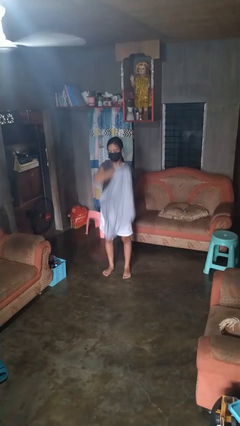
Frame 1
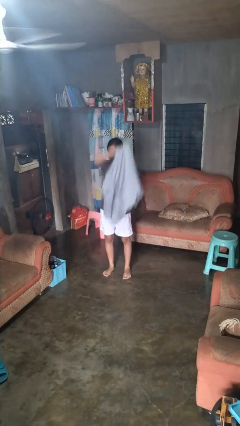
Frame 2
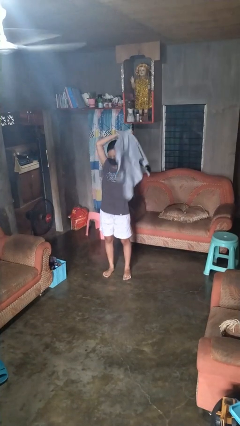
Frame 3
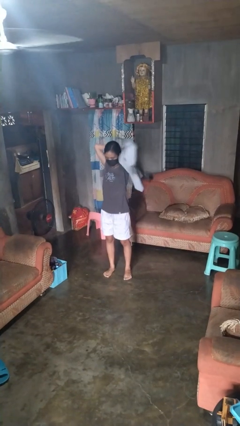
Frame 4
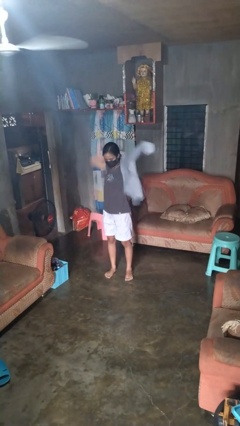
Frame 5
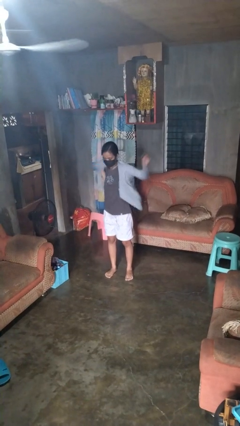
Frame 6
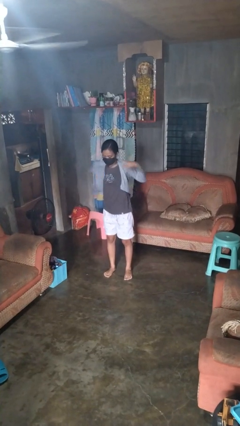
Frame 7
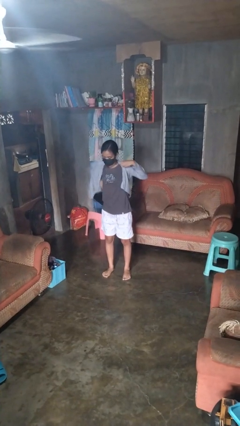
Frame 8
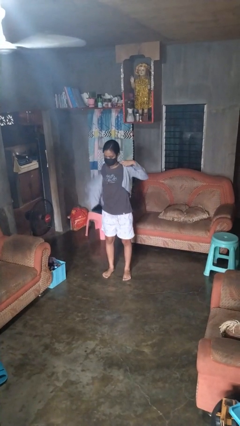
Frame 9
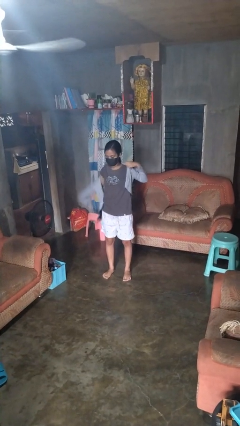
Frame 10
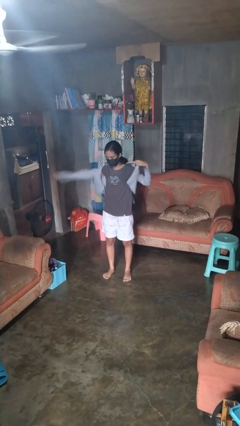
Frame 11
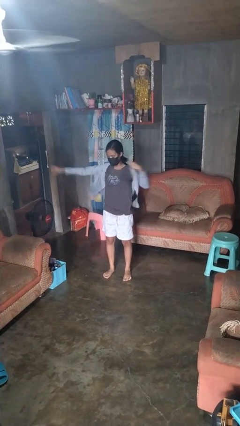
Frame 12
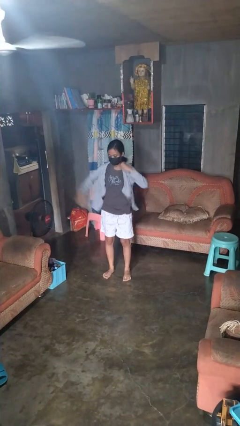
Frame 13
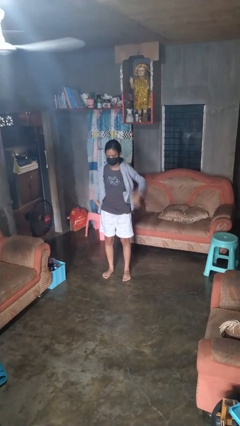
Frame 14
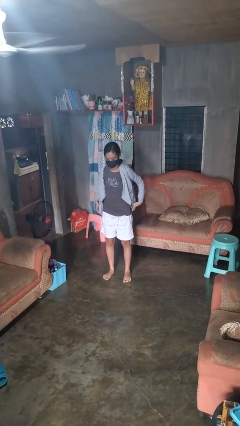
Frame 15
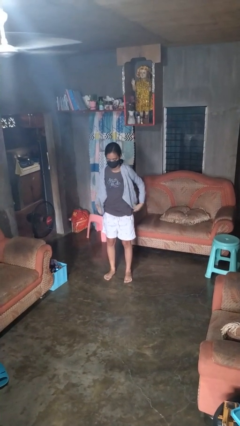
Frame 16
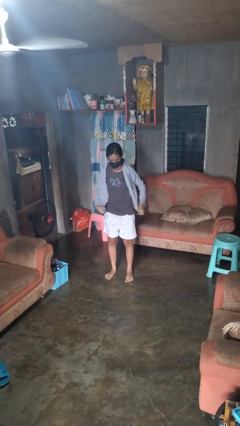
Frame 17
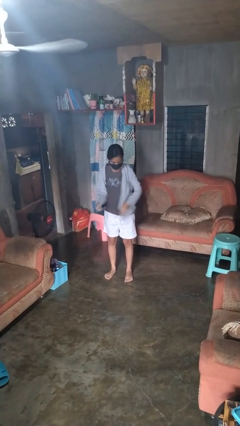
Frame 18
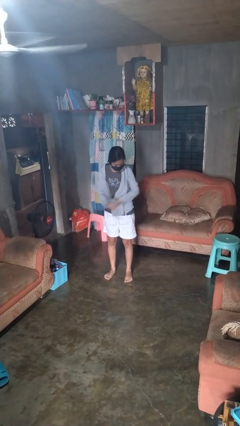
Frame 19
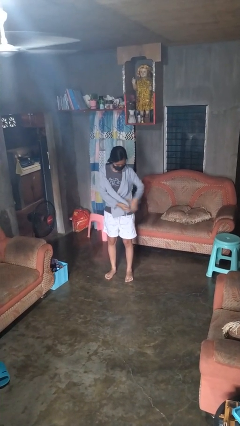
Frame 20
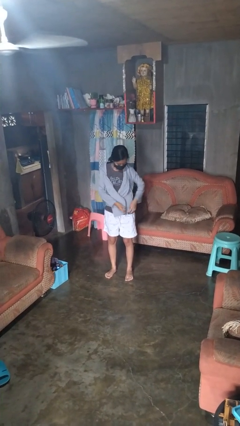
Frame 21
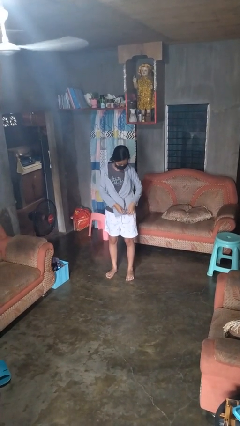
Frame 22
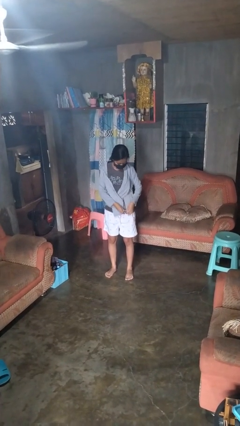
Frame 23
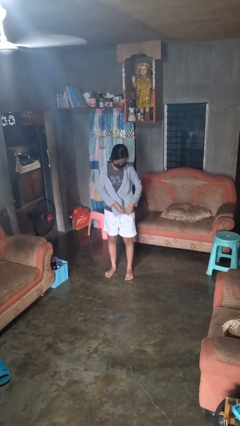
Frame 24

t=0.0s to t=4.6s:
person puts on jacket

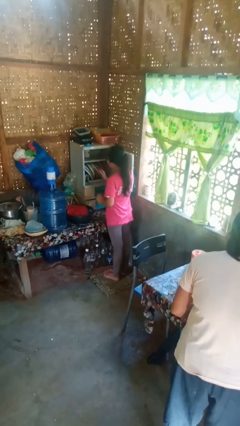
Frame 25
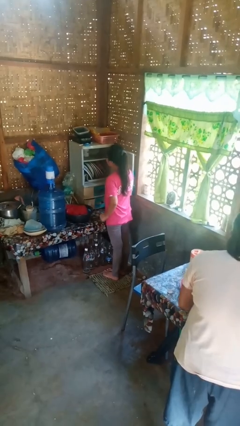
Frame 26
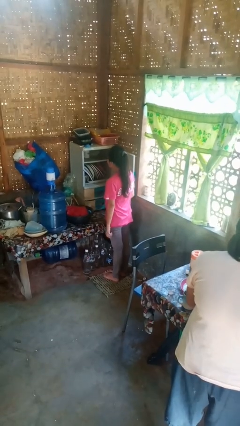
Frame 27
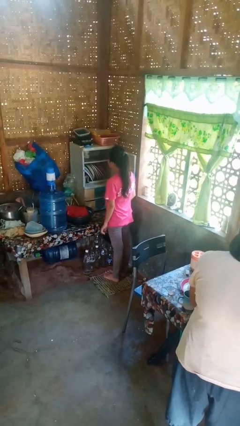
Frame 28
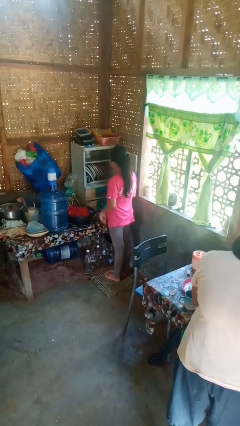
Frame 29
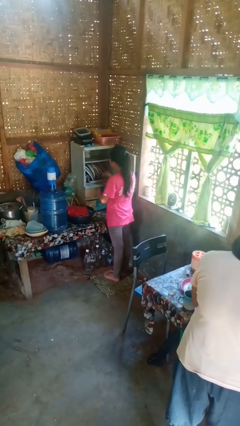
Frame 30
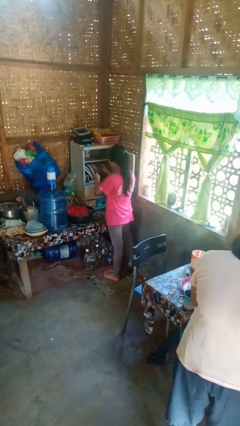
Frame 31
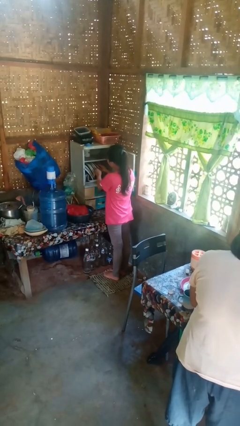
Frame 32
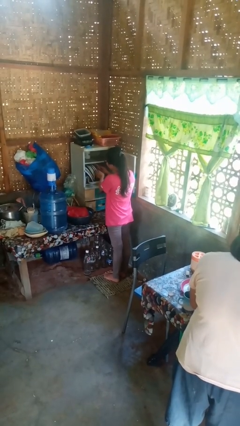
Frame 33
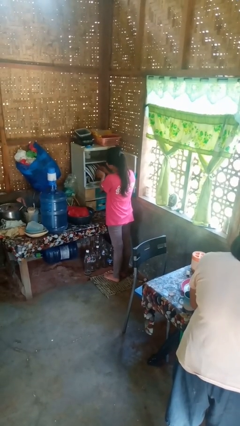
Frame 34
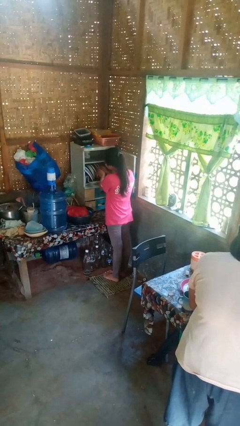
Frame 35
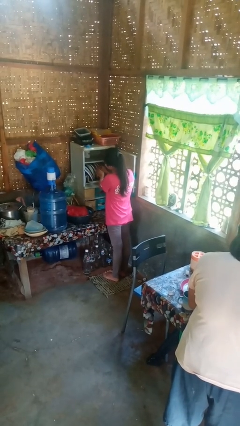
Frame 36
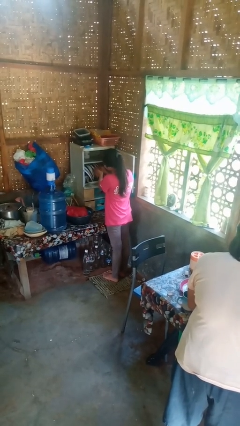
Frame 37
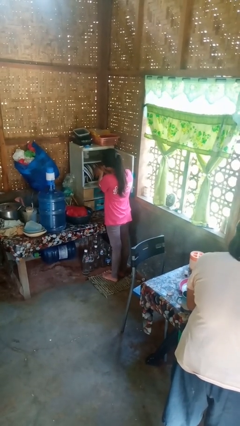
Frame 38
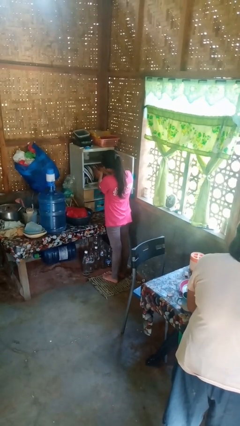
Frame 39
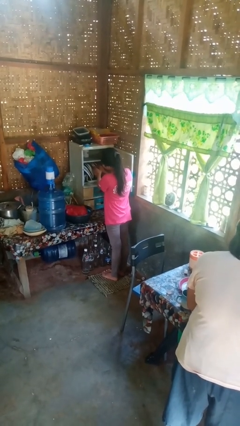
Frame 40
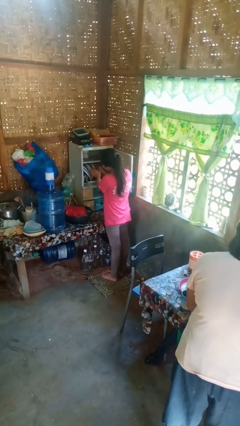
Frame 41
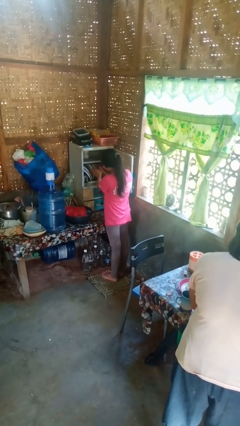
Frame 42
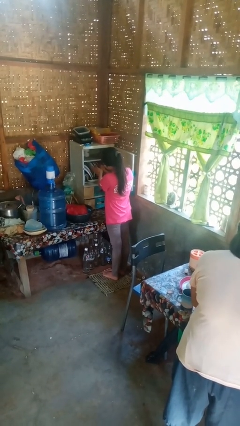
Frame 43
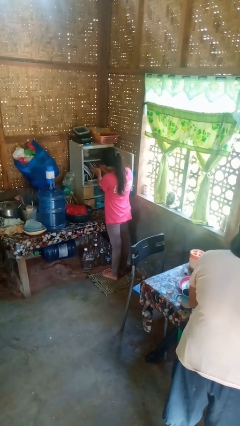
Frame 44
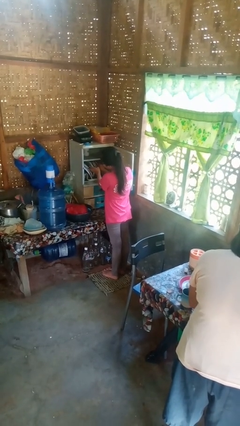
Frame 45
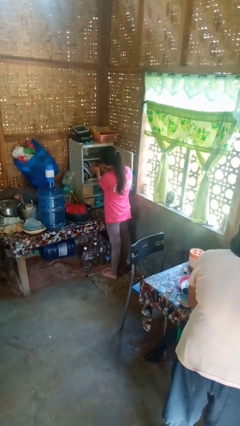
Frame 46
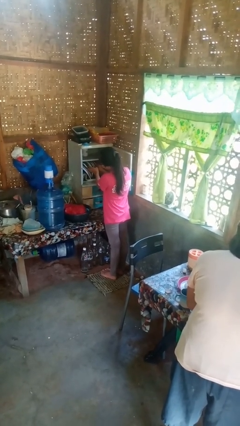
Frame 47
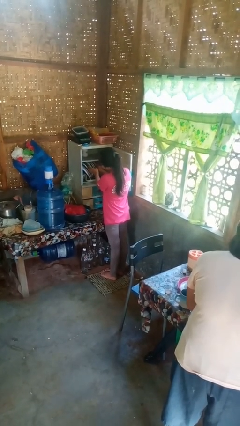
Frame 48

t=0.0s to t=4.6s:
person searches in cabinet

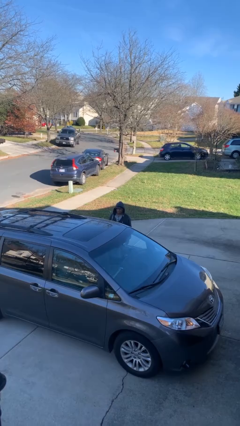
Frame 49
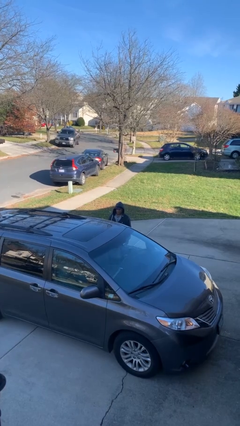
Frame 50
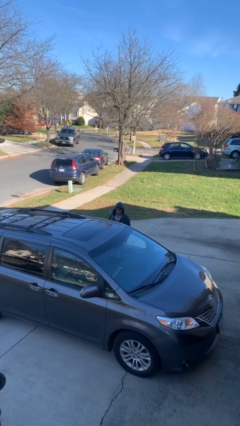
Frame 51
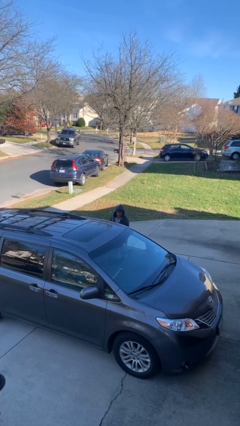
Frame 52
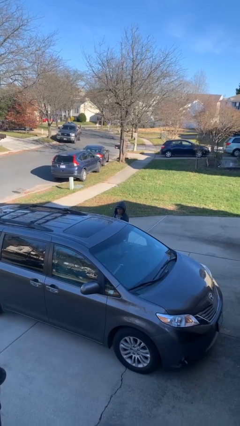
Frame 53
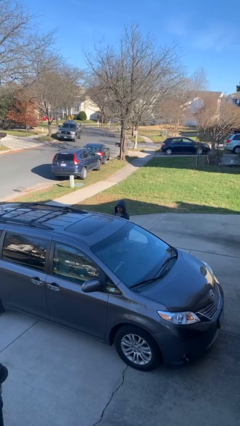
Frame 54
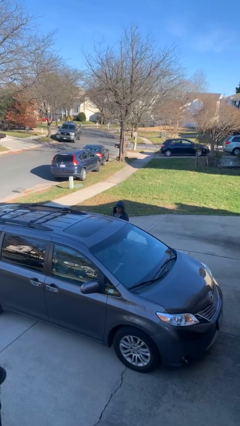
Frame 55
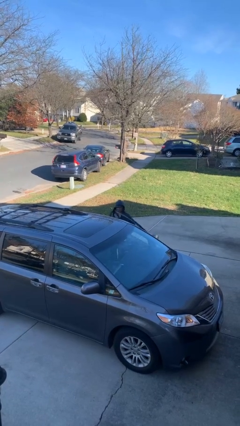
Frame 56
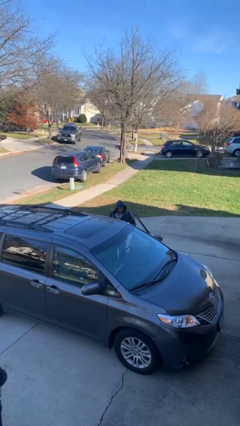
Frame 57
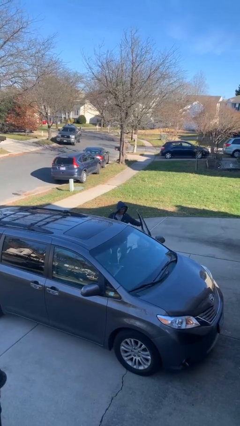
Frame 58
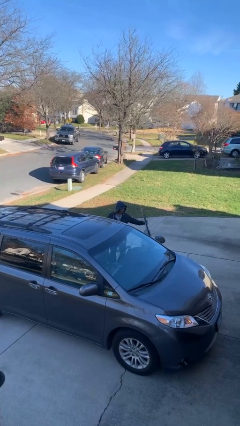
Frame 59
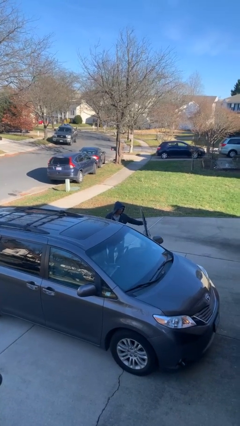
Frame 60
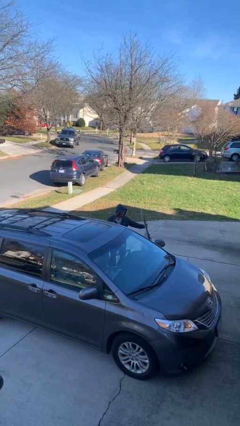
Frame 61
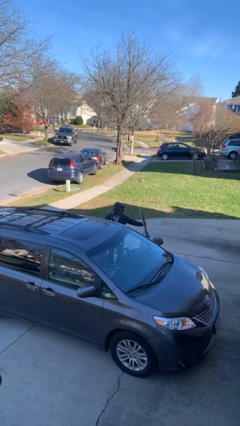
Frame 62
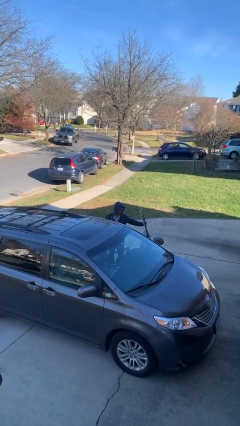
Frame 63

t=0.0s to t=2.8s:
person opens car door

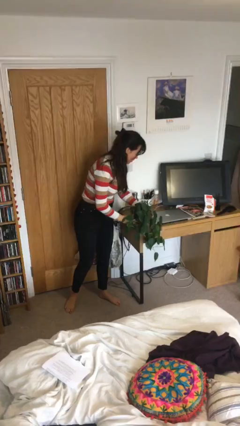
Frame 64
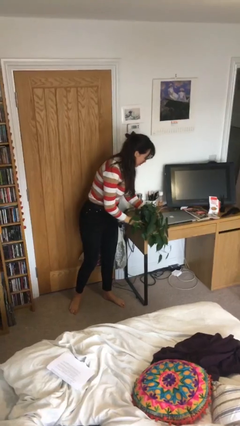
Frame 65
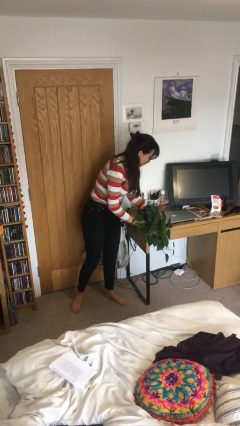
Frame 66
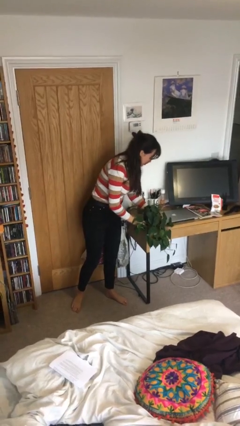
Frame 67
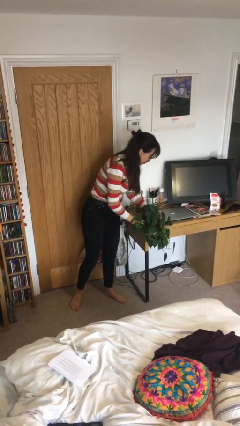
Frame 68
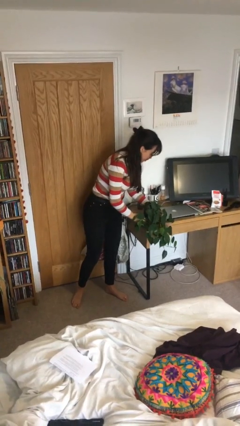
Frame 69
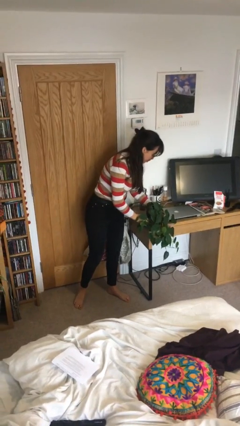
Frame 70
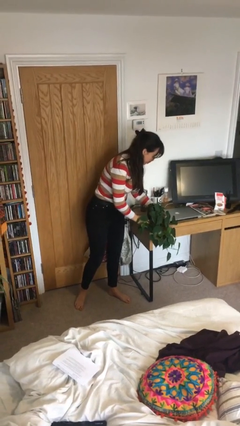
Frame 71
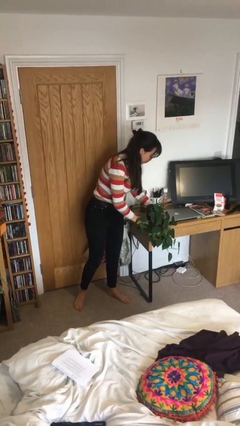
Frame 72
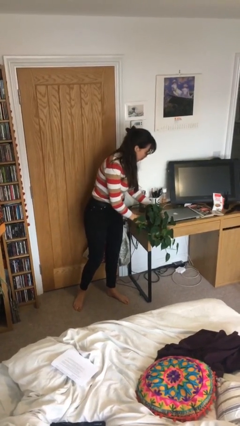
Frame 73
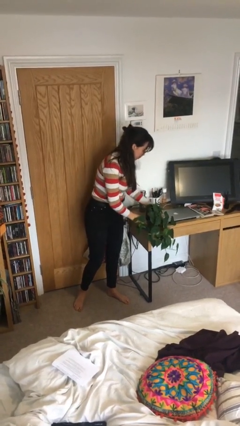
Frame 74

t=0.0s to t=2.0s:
person puts down object on table

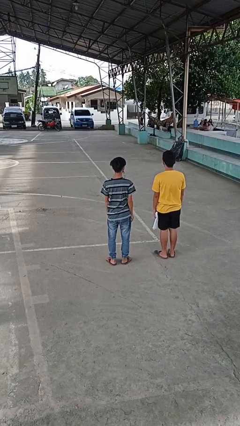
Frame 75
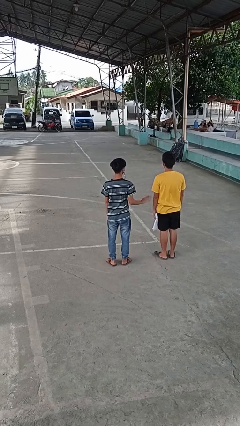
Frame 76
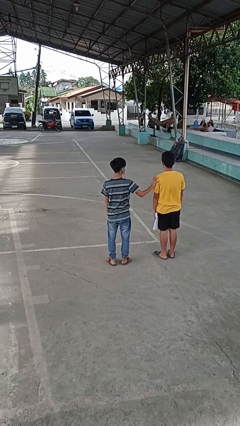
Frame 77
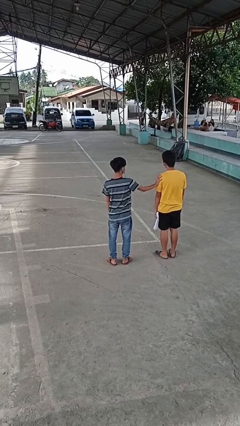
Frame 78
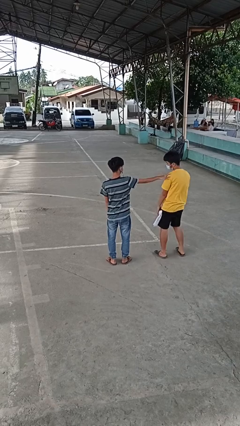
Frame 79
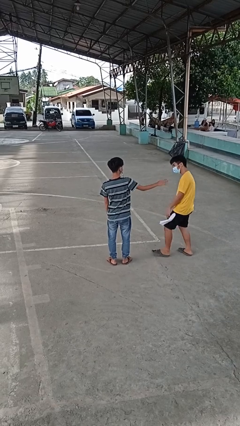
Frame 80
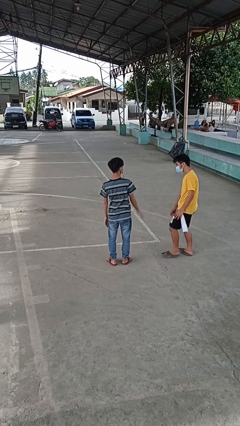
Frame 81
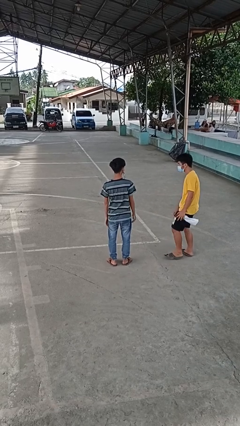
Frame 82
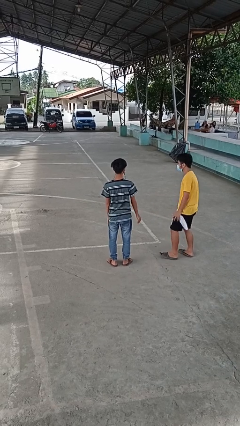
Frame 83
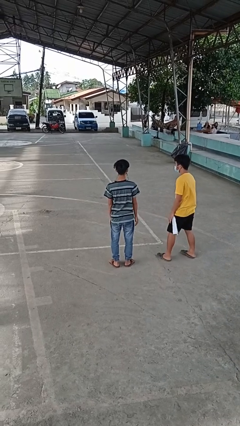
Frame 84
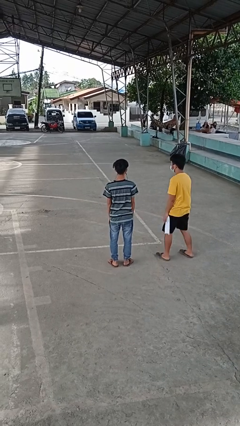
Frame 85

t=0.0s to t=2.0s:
person shoves person

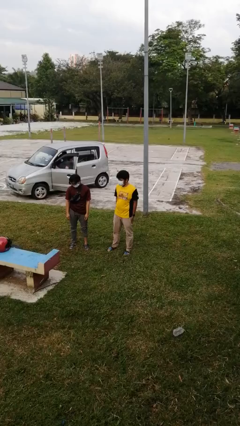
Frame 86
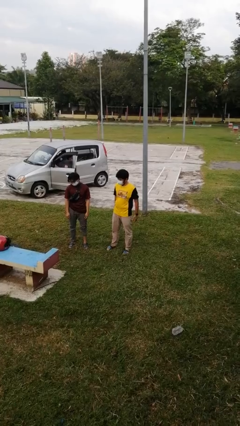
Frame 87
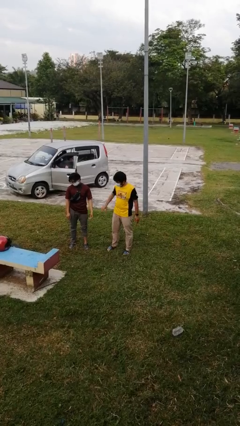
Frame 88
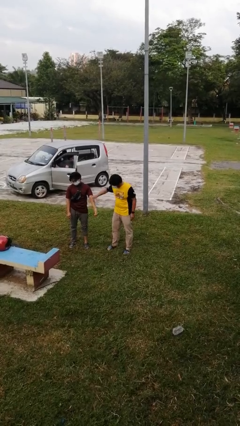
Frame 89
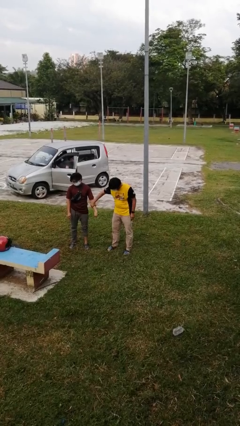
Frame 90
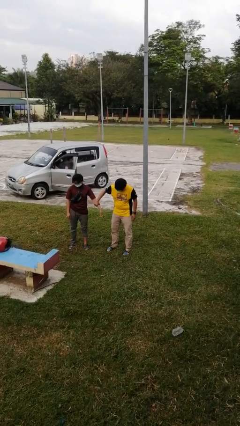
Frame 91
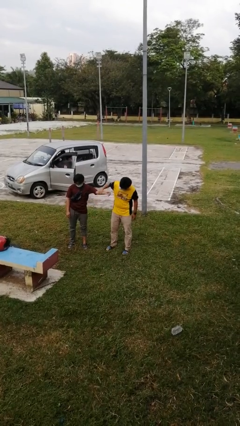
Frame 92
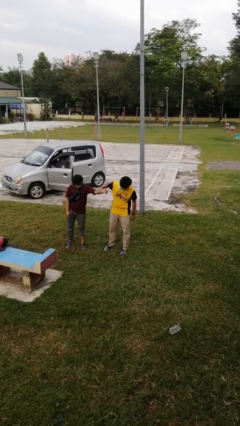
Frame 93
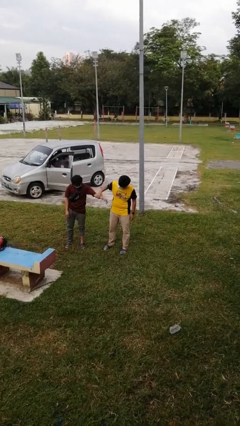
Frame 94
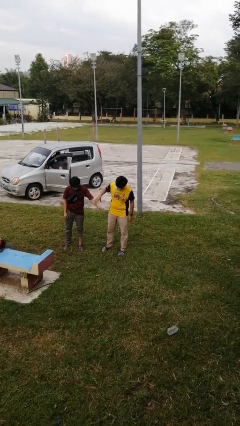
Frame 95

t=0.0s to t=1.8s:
person grabs person by forearm
